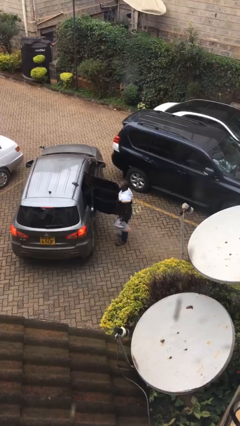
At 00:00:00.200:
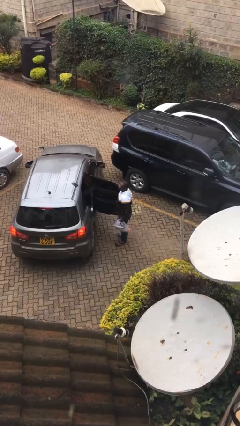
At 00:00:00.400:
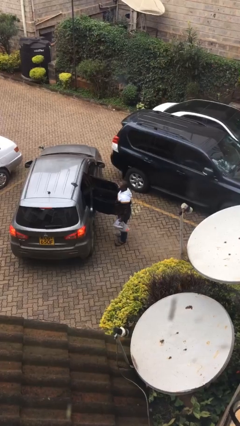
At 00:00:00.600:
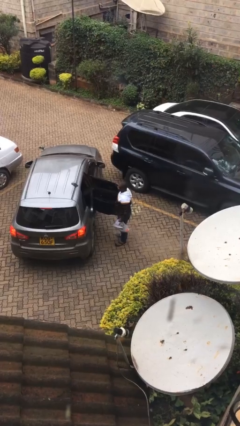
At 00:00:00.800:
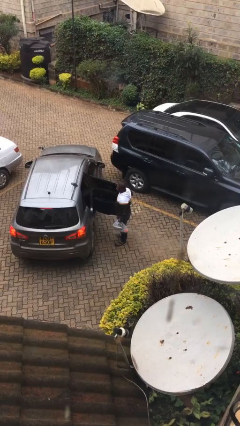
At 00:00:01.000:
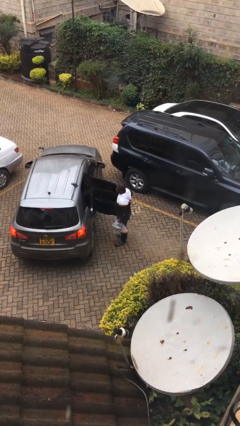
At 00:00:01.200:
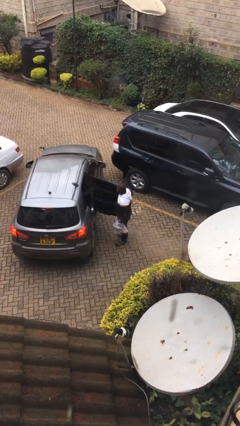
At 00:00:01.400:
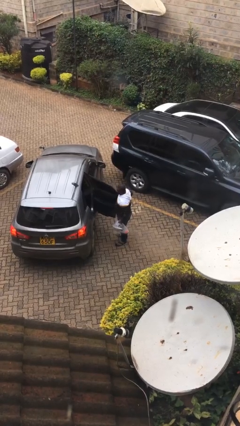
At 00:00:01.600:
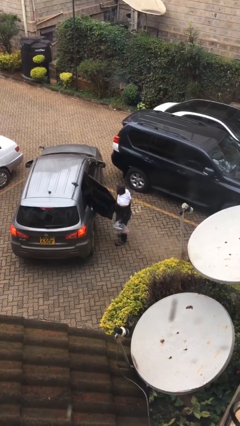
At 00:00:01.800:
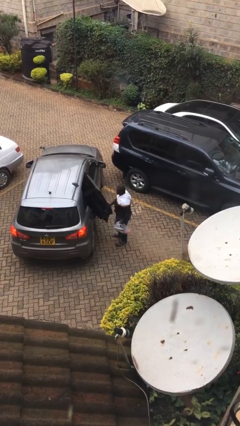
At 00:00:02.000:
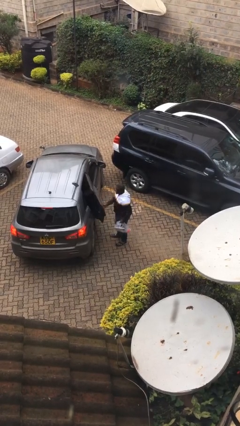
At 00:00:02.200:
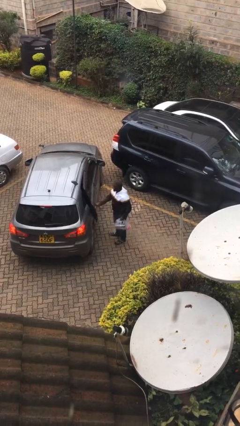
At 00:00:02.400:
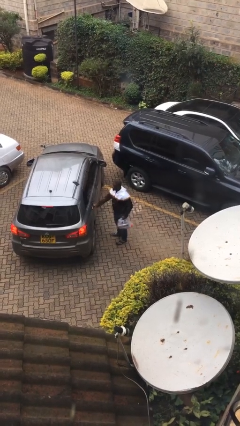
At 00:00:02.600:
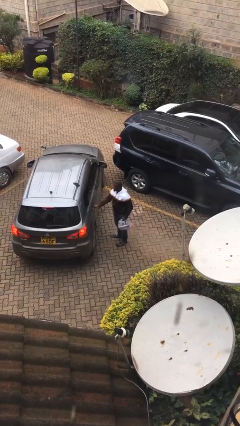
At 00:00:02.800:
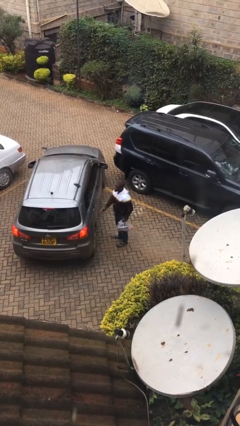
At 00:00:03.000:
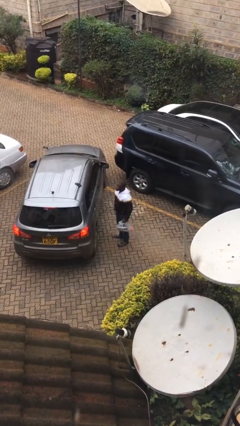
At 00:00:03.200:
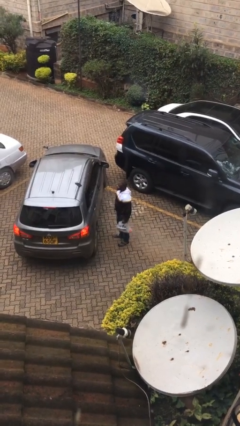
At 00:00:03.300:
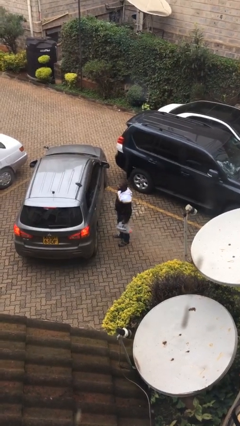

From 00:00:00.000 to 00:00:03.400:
person closes car door

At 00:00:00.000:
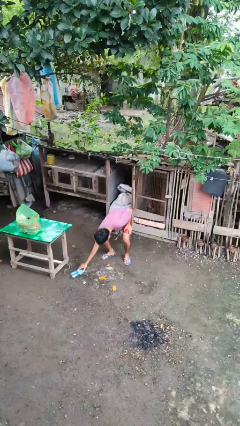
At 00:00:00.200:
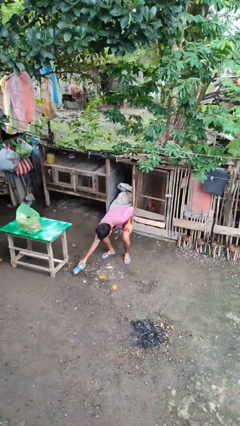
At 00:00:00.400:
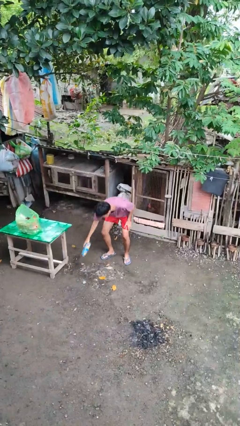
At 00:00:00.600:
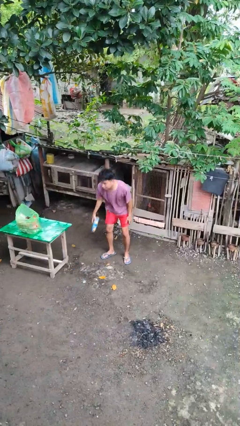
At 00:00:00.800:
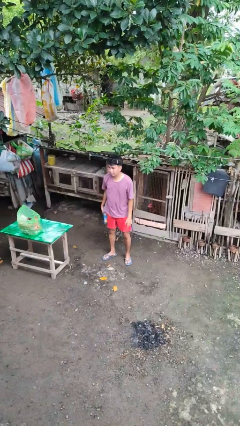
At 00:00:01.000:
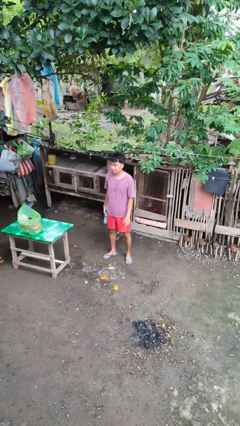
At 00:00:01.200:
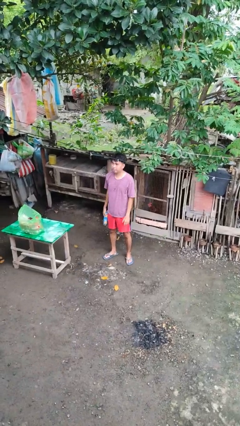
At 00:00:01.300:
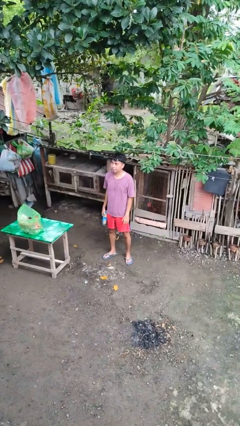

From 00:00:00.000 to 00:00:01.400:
person picks up object from floor

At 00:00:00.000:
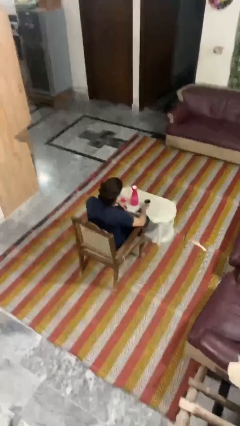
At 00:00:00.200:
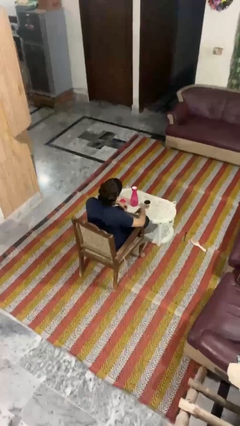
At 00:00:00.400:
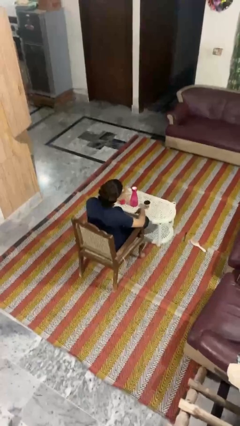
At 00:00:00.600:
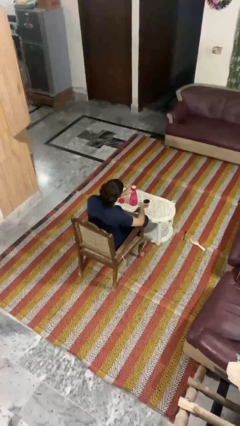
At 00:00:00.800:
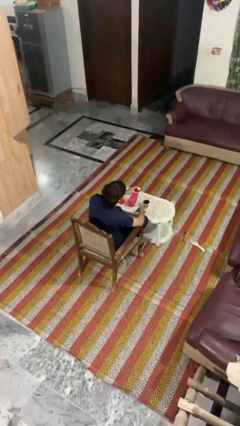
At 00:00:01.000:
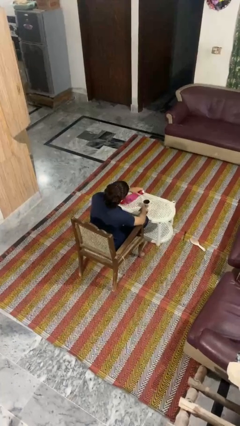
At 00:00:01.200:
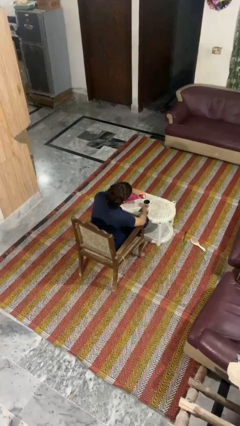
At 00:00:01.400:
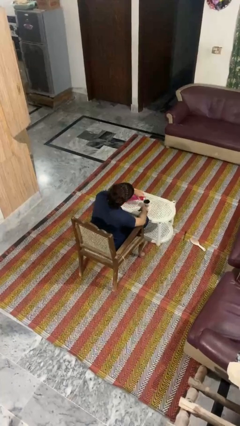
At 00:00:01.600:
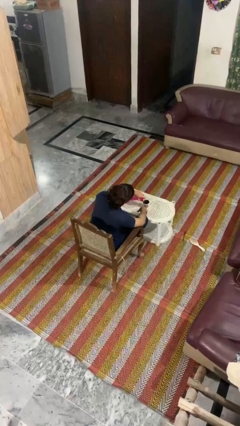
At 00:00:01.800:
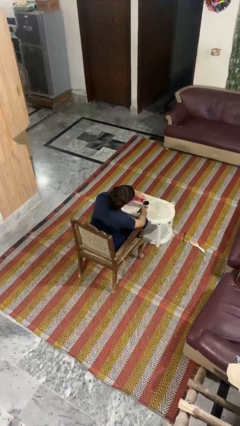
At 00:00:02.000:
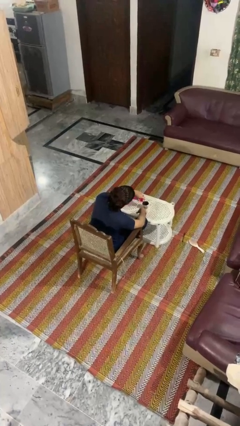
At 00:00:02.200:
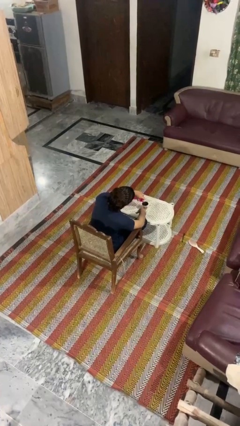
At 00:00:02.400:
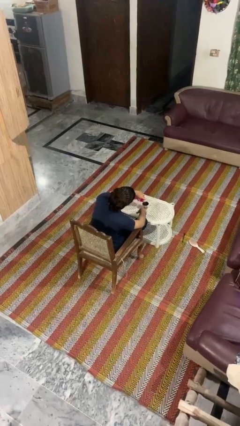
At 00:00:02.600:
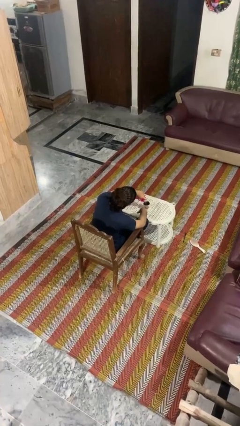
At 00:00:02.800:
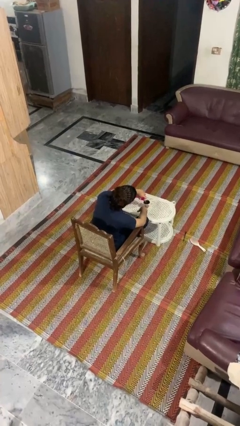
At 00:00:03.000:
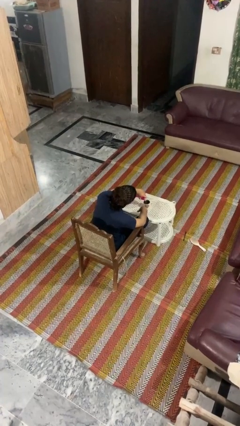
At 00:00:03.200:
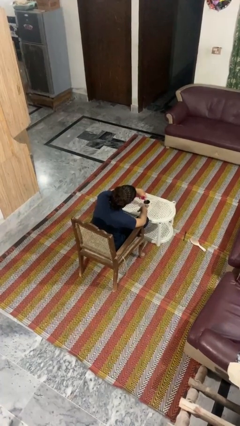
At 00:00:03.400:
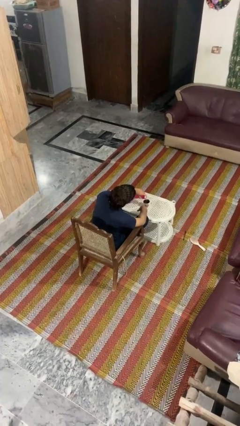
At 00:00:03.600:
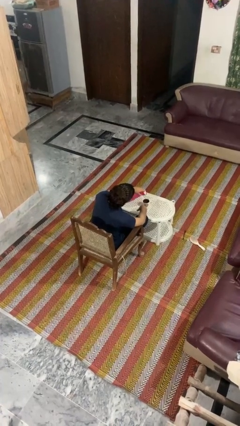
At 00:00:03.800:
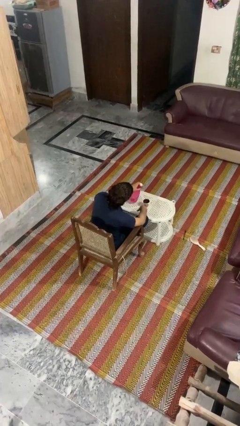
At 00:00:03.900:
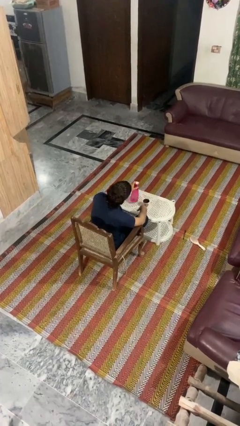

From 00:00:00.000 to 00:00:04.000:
person pours liquid into cup

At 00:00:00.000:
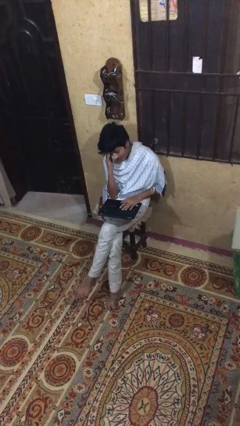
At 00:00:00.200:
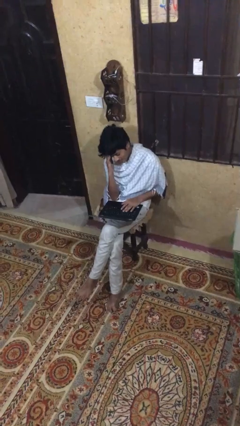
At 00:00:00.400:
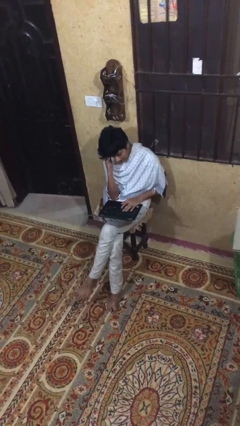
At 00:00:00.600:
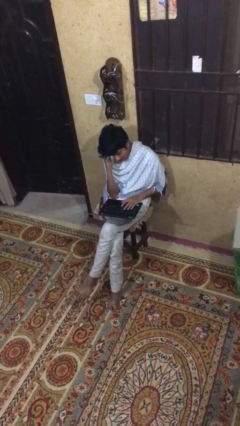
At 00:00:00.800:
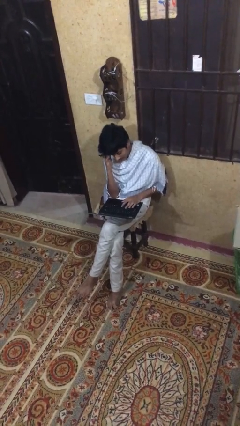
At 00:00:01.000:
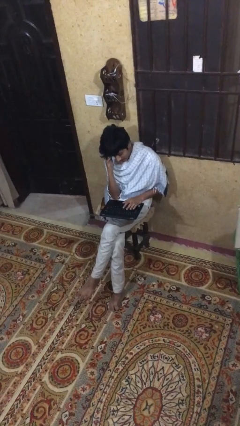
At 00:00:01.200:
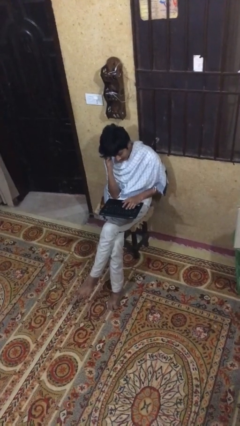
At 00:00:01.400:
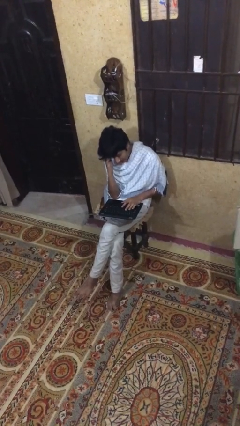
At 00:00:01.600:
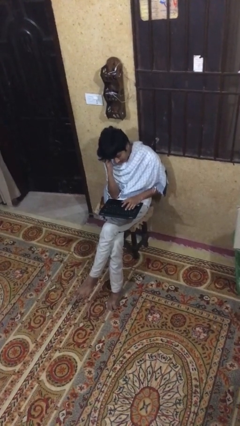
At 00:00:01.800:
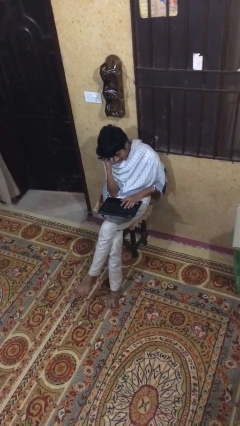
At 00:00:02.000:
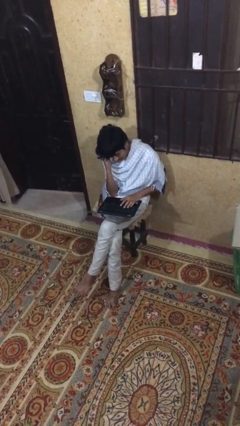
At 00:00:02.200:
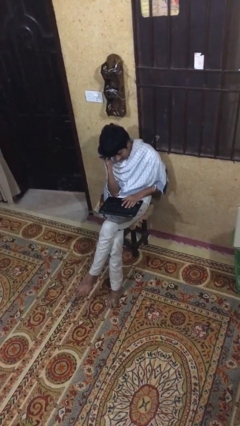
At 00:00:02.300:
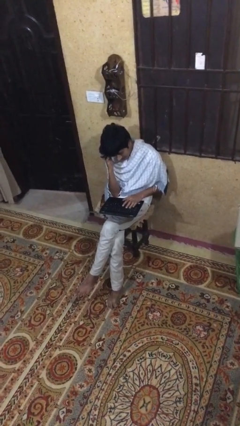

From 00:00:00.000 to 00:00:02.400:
person interacts with laptop

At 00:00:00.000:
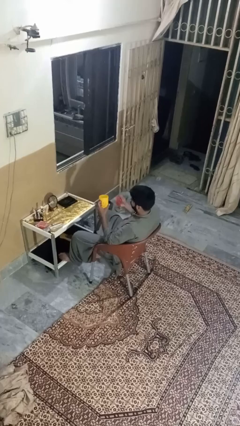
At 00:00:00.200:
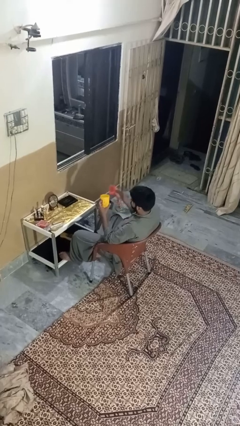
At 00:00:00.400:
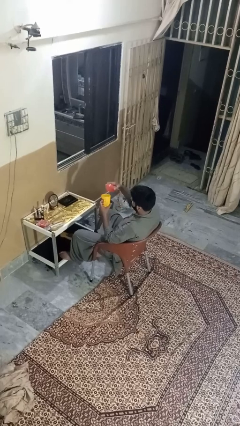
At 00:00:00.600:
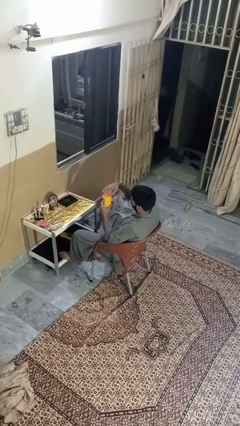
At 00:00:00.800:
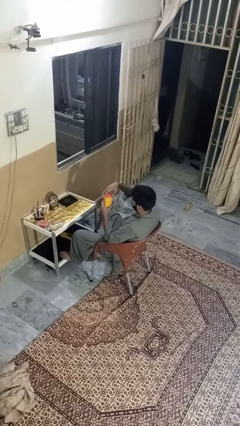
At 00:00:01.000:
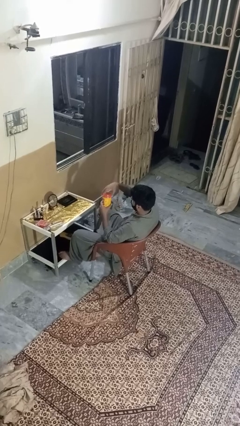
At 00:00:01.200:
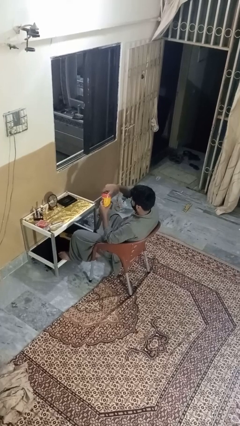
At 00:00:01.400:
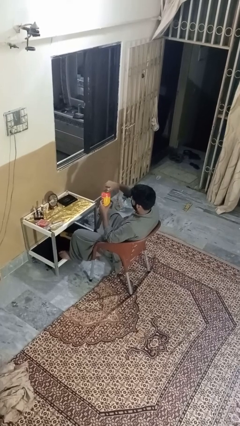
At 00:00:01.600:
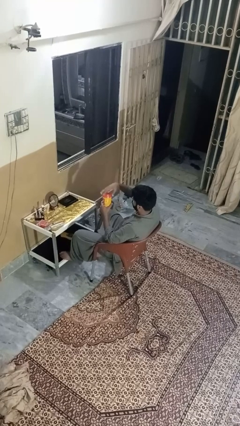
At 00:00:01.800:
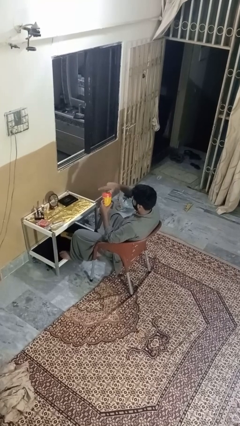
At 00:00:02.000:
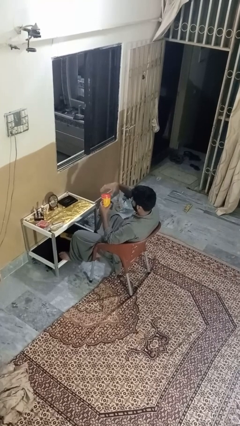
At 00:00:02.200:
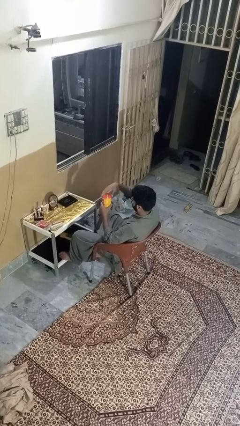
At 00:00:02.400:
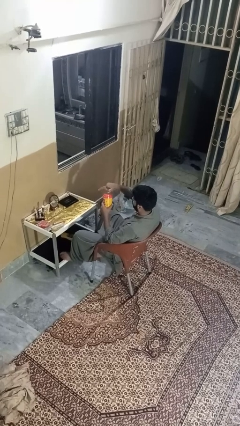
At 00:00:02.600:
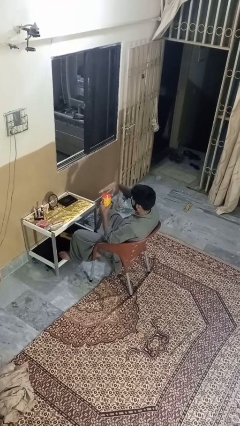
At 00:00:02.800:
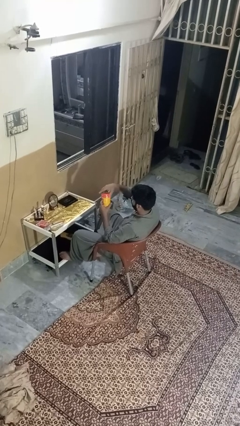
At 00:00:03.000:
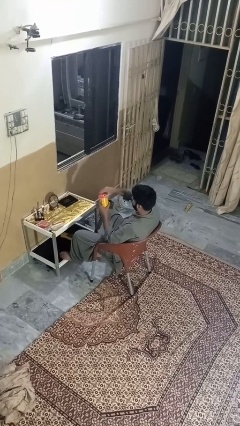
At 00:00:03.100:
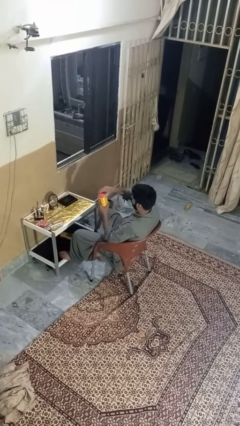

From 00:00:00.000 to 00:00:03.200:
person closes jar

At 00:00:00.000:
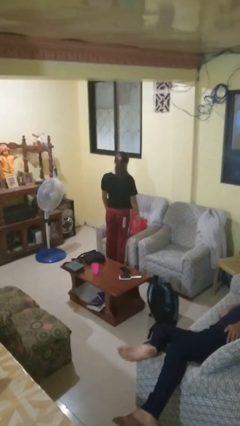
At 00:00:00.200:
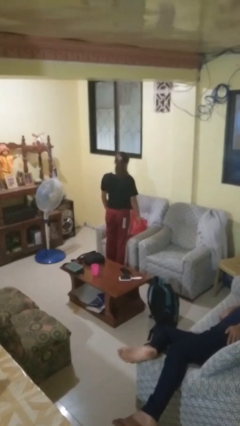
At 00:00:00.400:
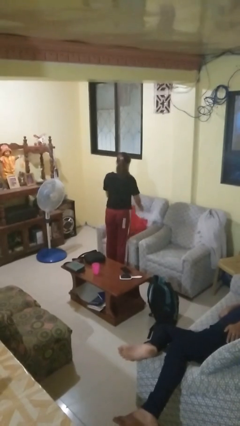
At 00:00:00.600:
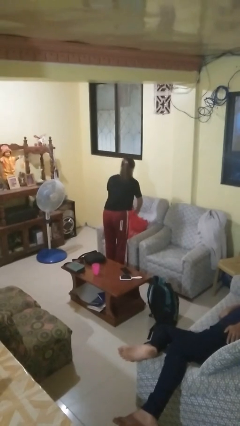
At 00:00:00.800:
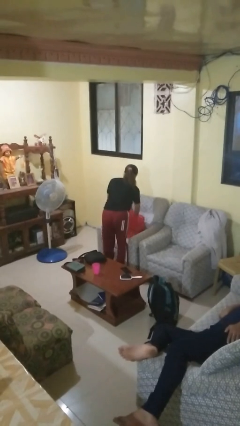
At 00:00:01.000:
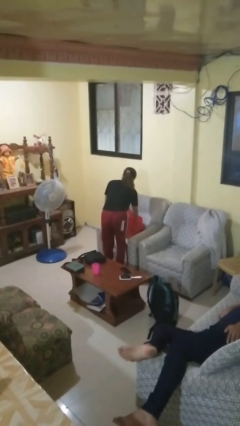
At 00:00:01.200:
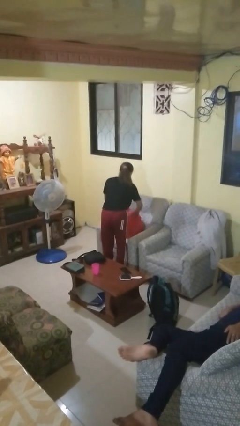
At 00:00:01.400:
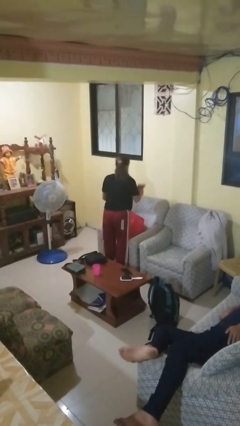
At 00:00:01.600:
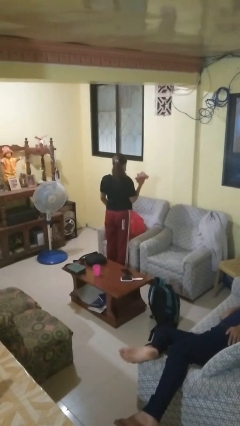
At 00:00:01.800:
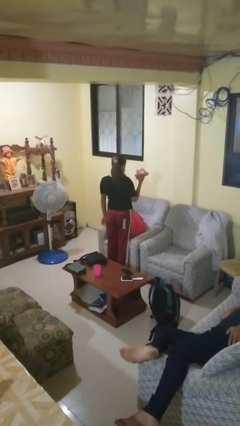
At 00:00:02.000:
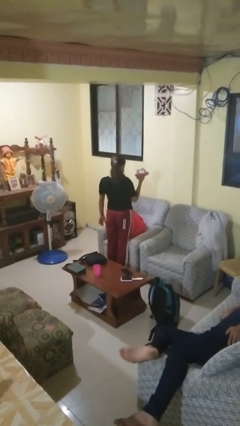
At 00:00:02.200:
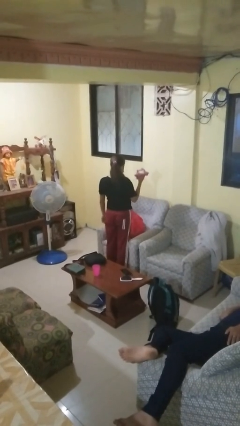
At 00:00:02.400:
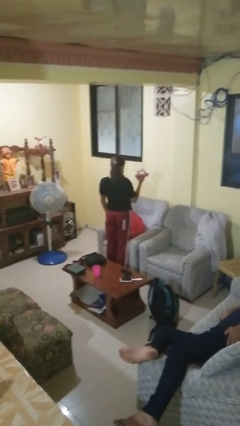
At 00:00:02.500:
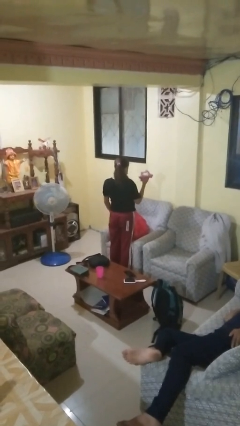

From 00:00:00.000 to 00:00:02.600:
person takes object from bag
